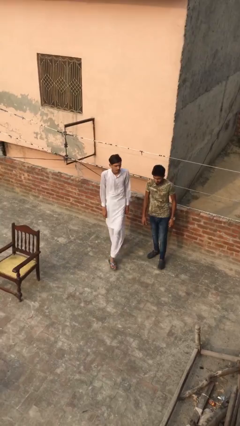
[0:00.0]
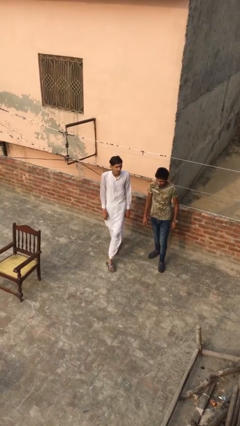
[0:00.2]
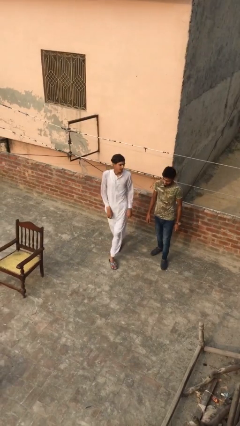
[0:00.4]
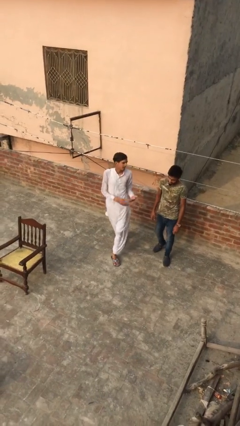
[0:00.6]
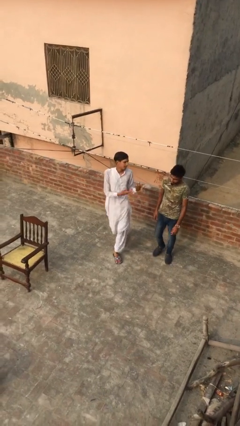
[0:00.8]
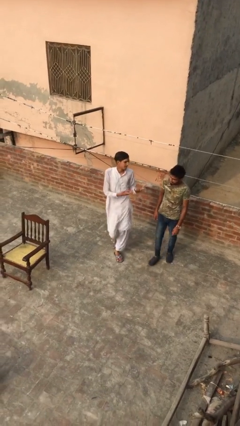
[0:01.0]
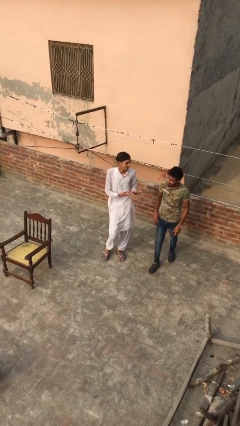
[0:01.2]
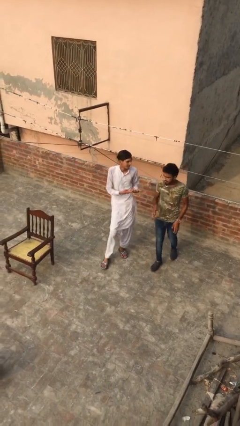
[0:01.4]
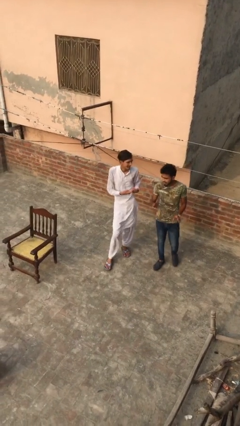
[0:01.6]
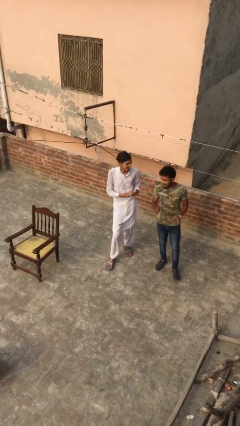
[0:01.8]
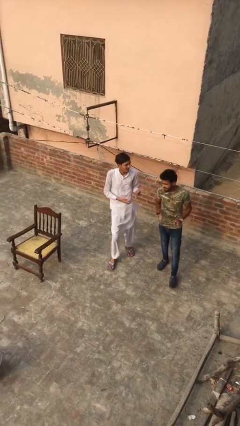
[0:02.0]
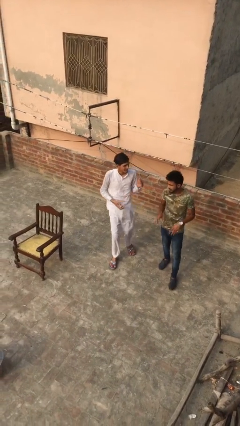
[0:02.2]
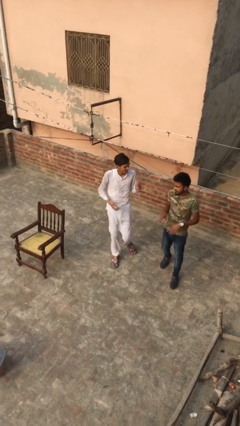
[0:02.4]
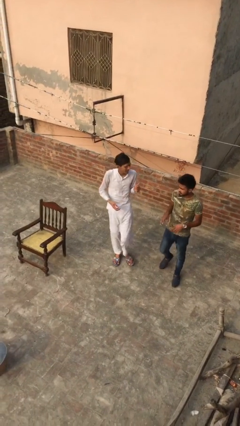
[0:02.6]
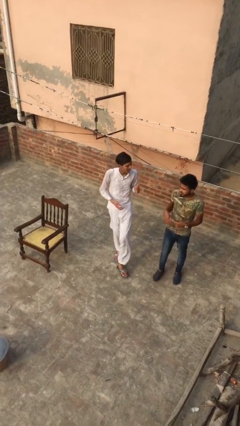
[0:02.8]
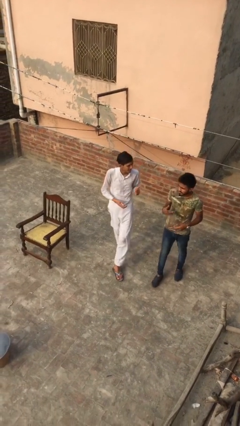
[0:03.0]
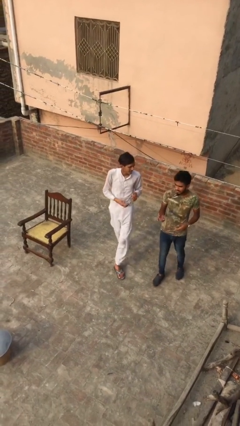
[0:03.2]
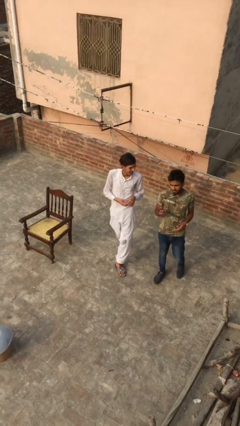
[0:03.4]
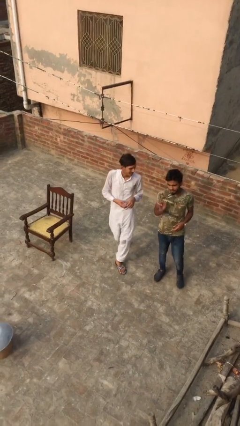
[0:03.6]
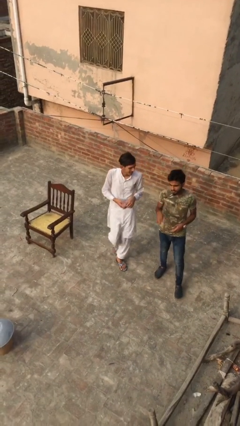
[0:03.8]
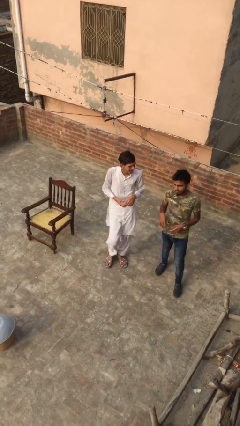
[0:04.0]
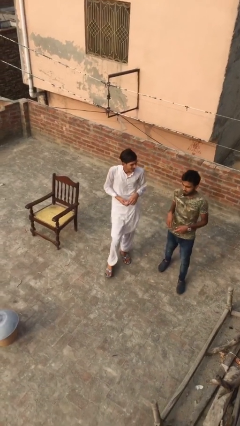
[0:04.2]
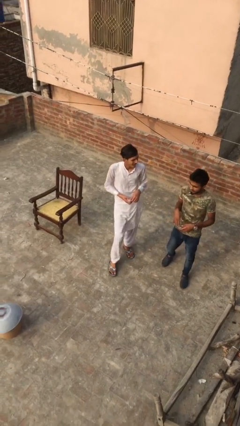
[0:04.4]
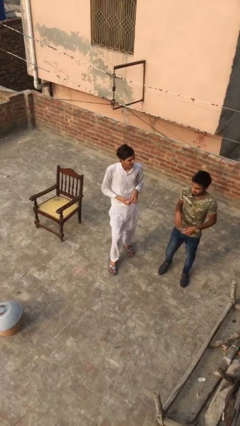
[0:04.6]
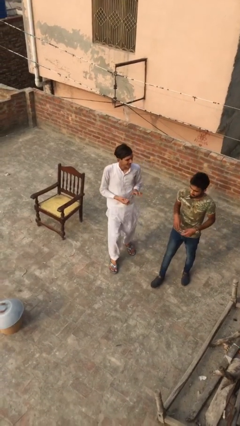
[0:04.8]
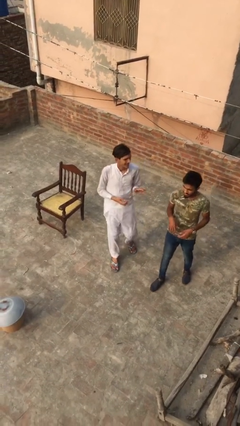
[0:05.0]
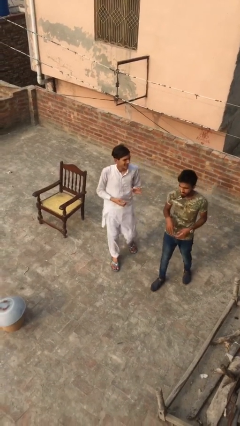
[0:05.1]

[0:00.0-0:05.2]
person talks to person

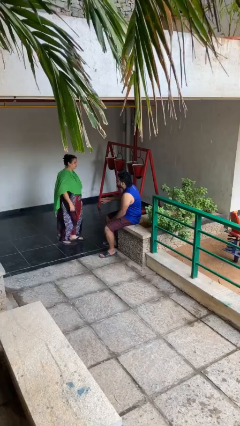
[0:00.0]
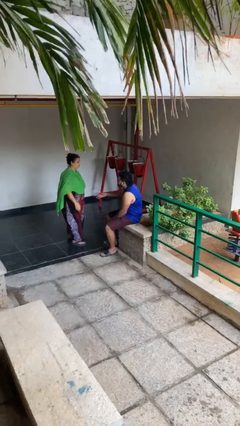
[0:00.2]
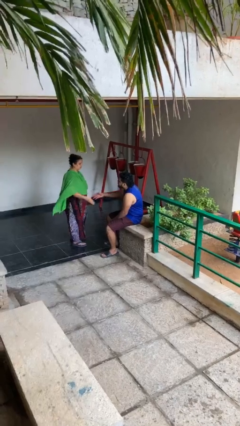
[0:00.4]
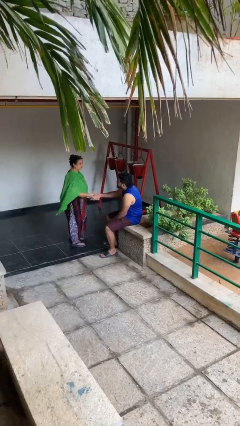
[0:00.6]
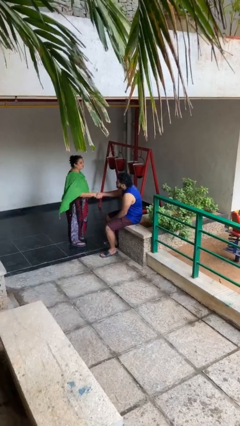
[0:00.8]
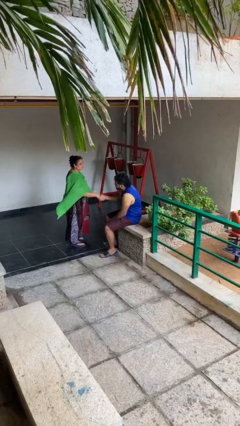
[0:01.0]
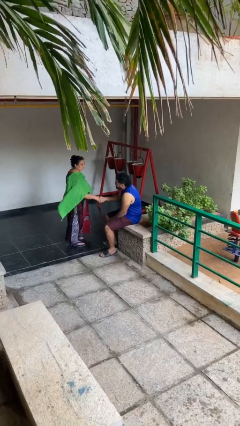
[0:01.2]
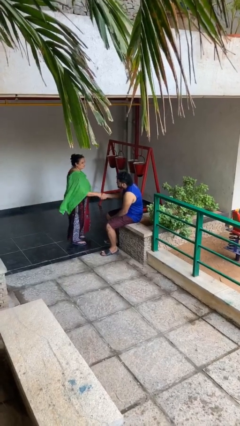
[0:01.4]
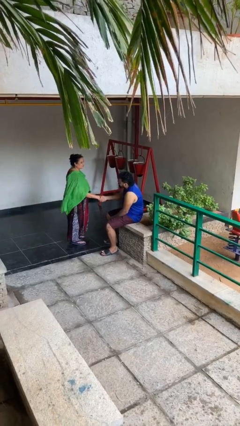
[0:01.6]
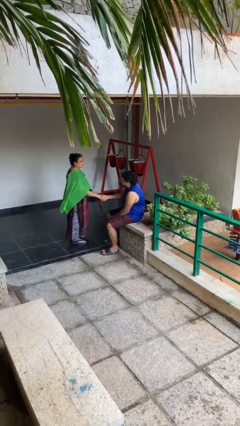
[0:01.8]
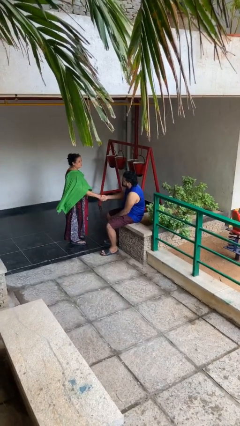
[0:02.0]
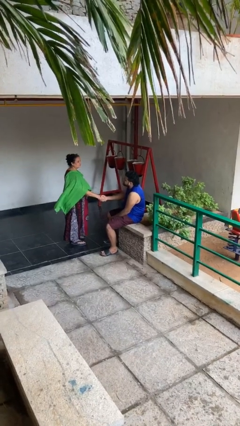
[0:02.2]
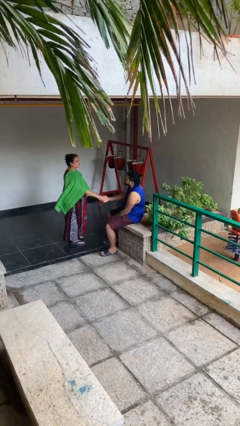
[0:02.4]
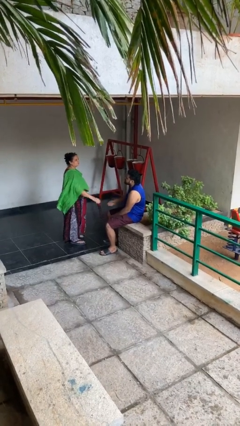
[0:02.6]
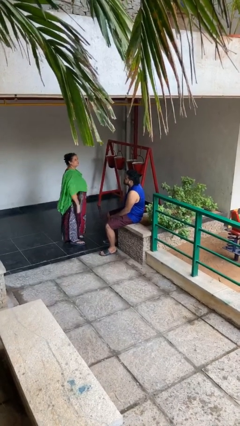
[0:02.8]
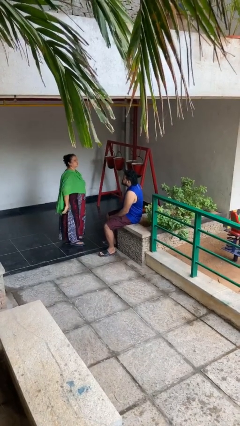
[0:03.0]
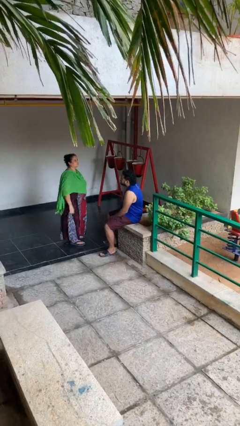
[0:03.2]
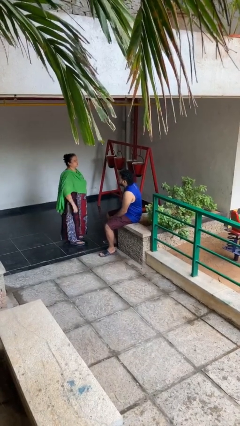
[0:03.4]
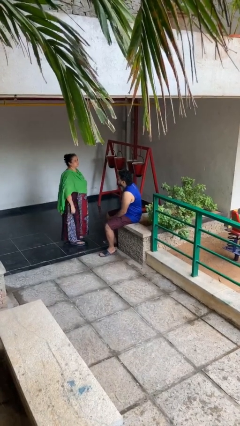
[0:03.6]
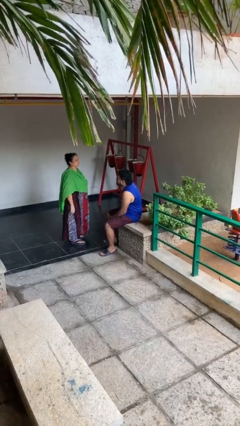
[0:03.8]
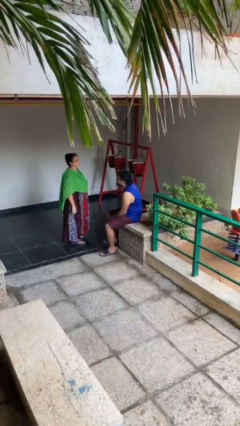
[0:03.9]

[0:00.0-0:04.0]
person shakes hand

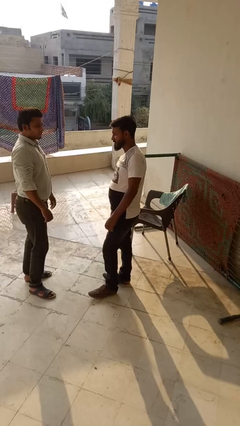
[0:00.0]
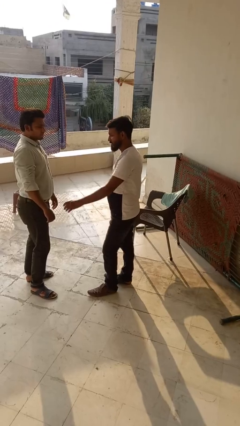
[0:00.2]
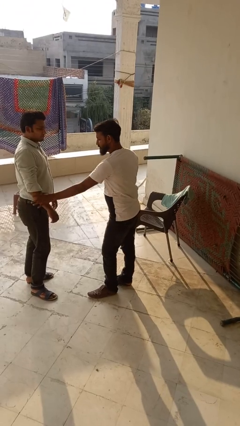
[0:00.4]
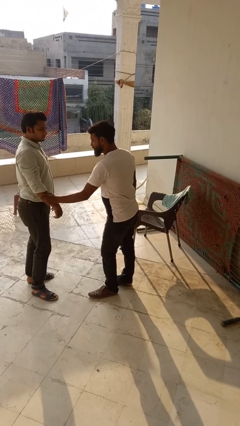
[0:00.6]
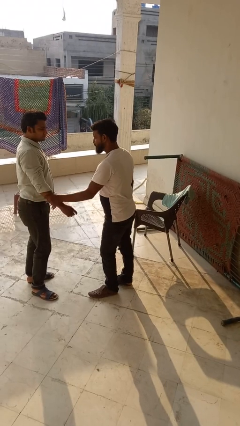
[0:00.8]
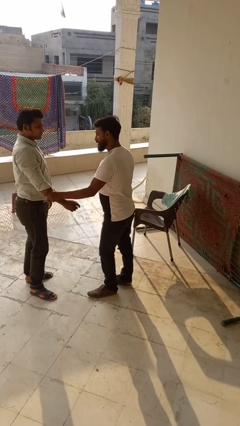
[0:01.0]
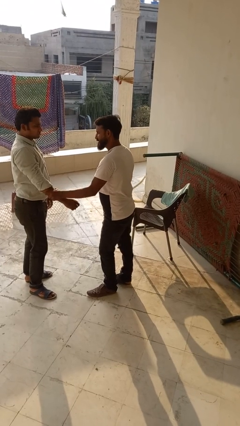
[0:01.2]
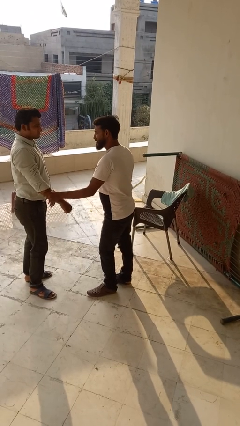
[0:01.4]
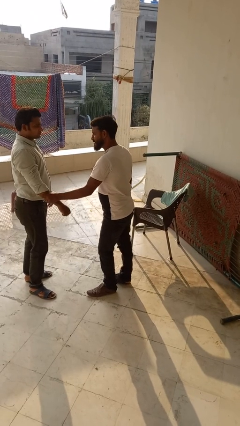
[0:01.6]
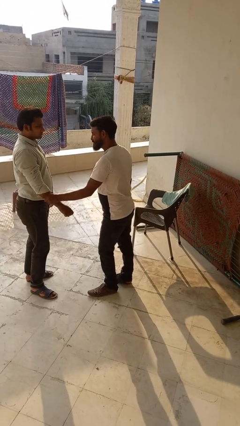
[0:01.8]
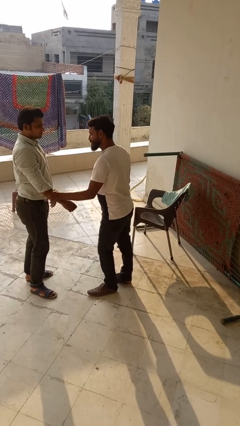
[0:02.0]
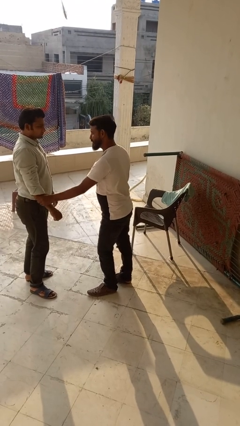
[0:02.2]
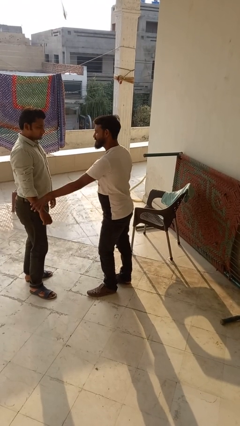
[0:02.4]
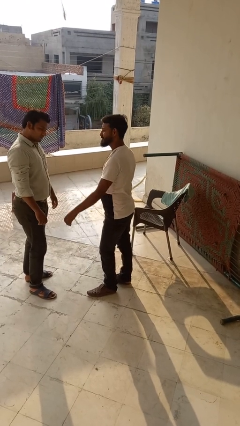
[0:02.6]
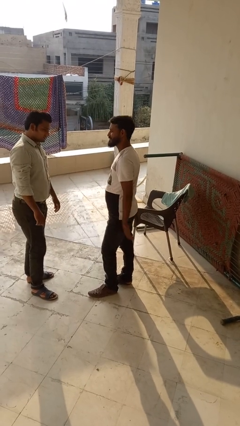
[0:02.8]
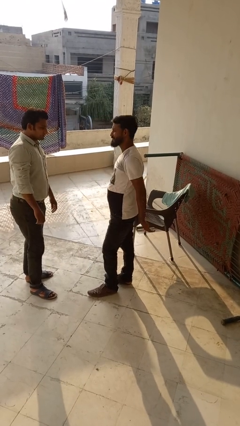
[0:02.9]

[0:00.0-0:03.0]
person grabs person by forearm

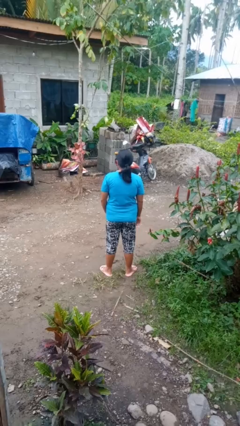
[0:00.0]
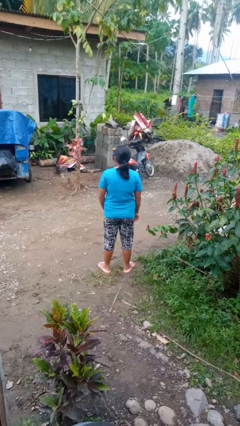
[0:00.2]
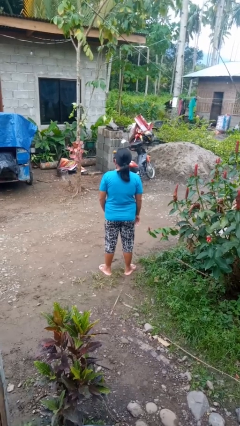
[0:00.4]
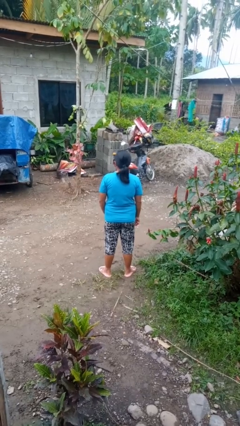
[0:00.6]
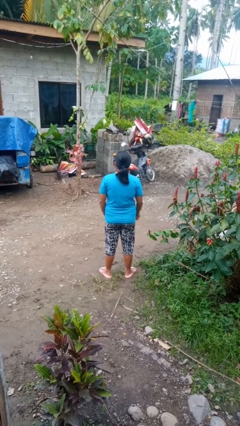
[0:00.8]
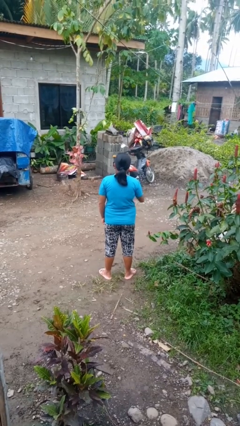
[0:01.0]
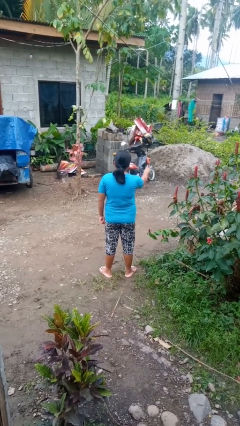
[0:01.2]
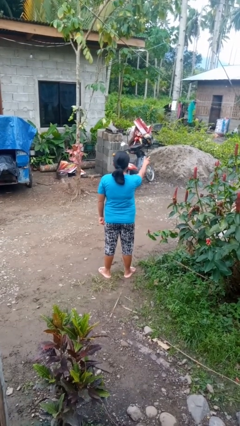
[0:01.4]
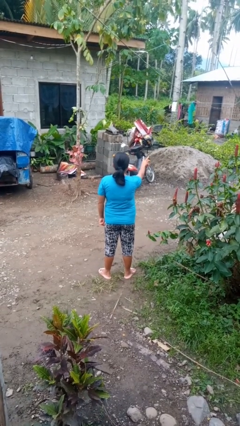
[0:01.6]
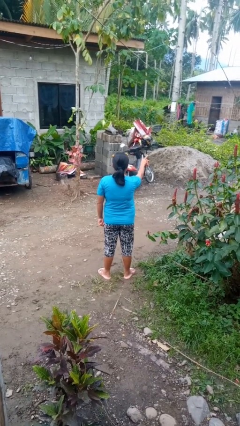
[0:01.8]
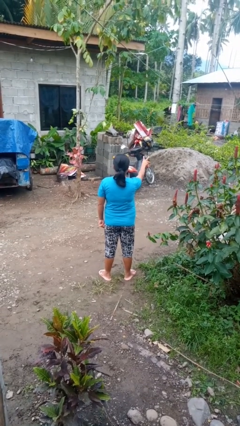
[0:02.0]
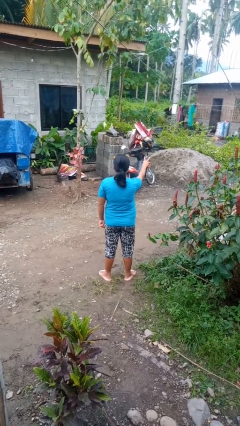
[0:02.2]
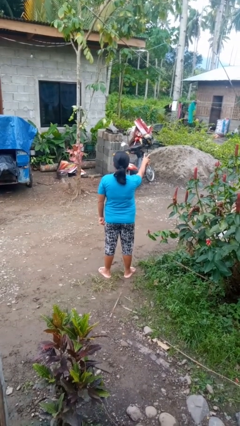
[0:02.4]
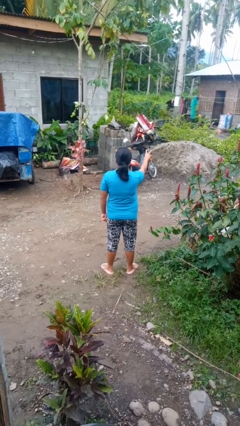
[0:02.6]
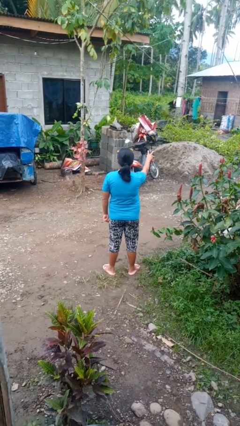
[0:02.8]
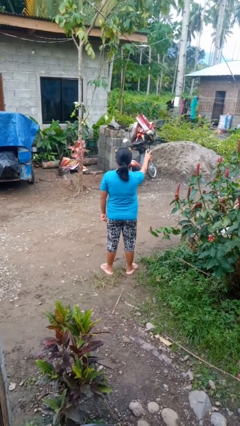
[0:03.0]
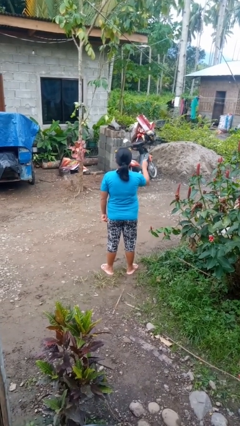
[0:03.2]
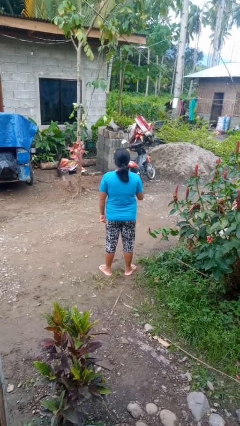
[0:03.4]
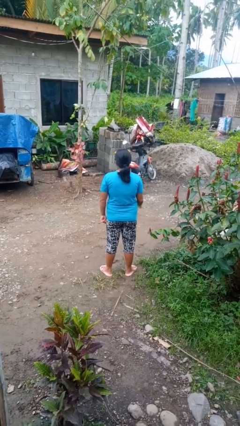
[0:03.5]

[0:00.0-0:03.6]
person gestures peace

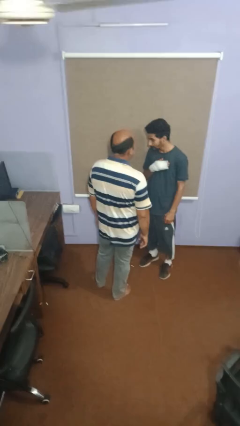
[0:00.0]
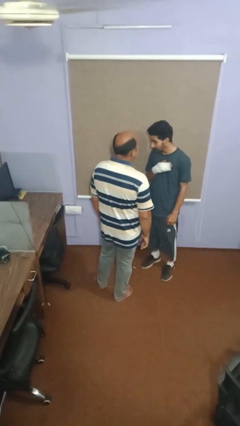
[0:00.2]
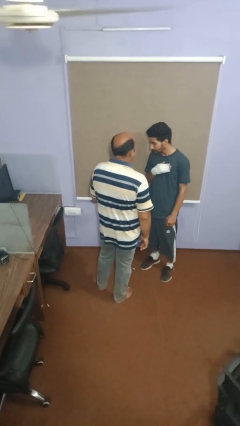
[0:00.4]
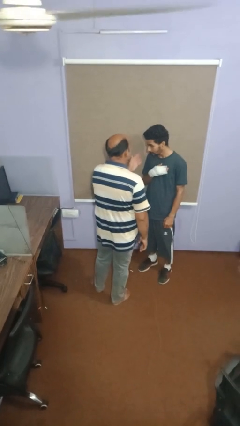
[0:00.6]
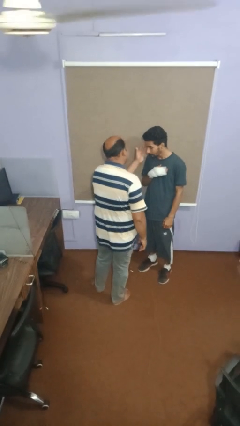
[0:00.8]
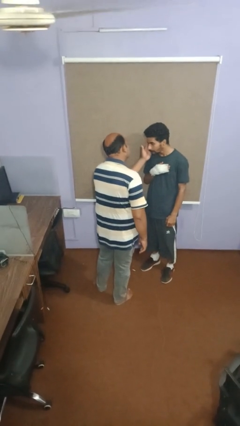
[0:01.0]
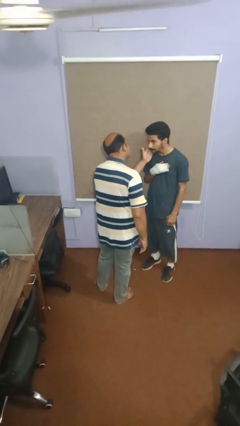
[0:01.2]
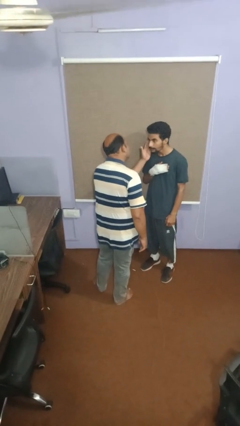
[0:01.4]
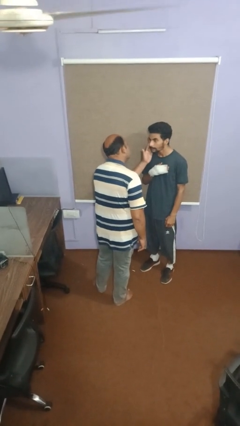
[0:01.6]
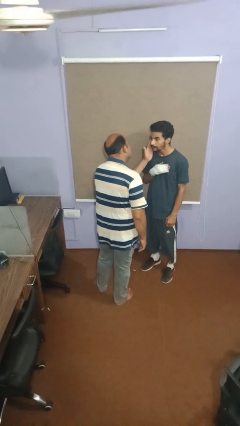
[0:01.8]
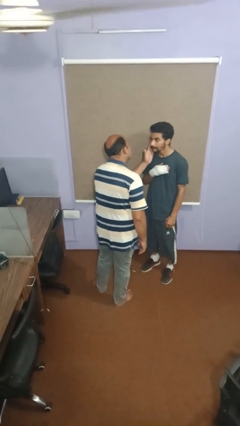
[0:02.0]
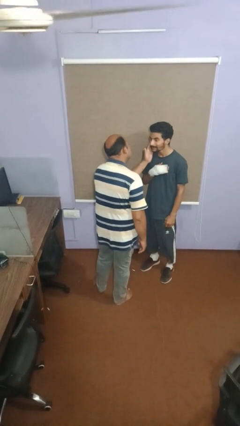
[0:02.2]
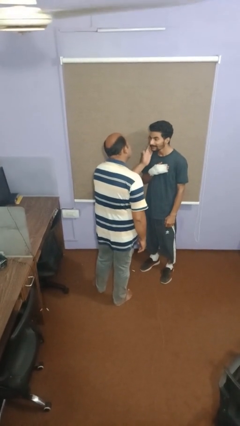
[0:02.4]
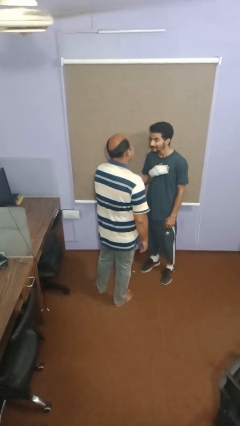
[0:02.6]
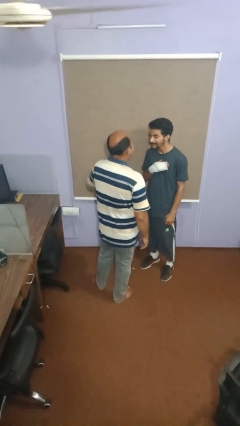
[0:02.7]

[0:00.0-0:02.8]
person touches face of person
